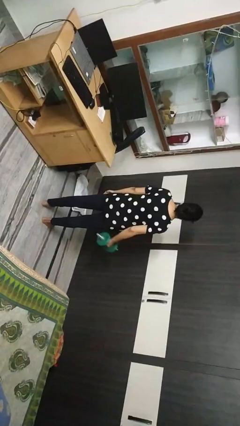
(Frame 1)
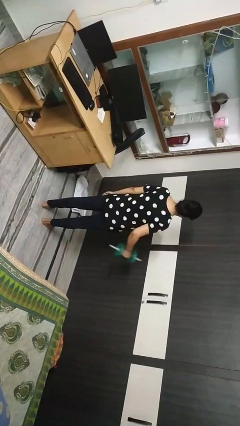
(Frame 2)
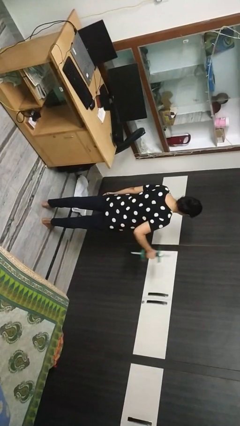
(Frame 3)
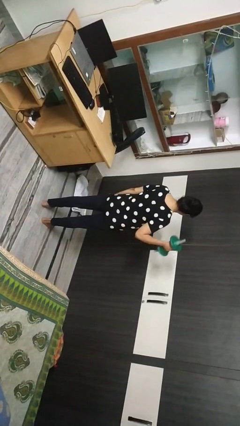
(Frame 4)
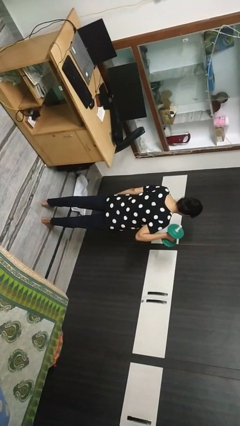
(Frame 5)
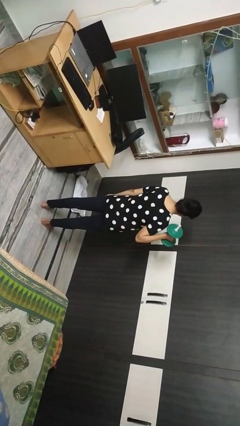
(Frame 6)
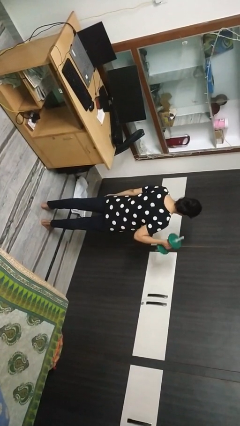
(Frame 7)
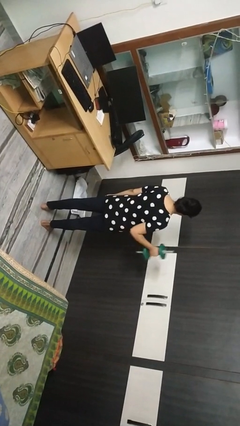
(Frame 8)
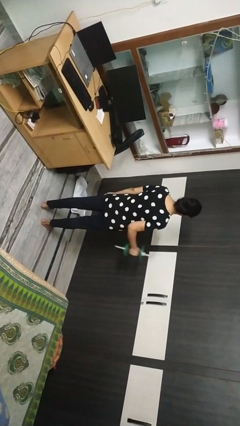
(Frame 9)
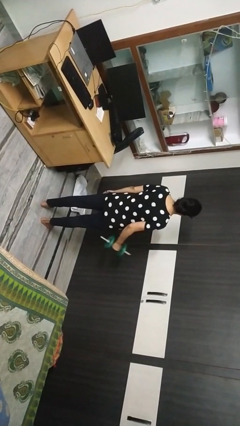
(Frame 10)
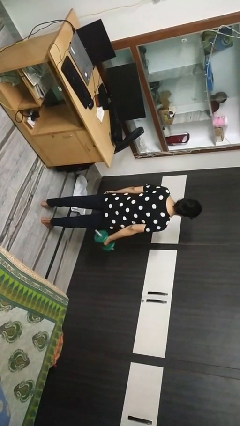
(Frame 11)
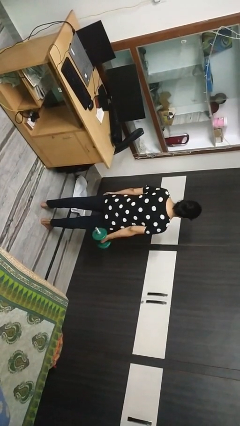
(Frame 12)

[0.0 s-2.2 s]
person lifts dumbbells

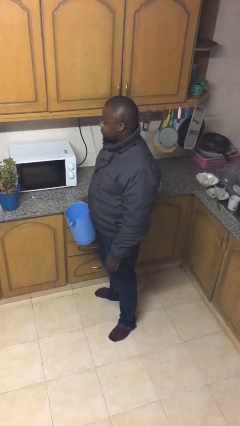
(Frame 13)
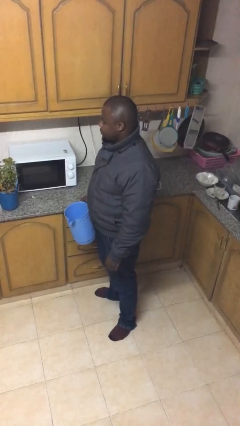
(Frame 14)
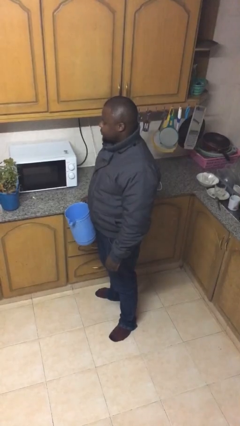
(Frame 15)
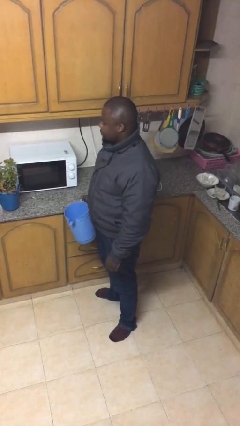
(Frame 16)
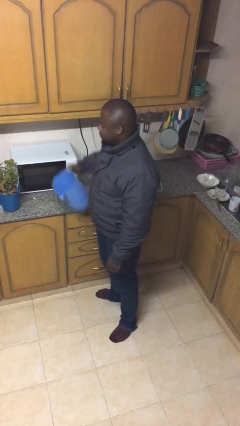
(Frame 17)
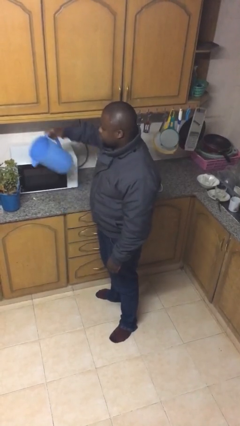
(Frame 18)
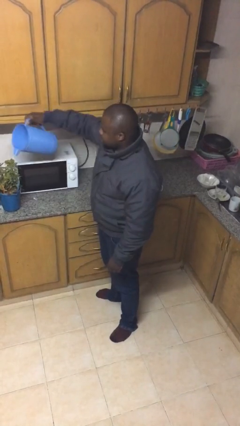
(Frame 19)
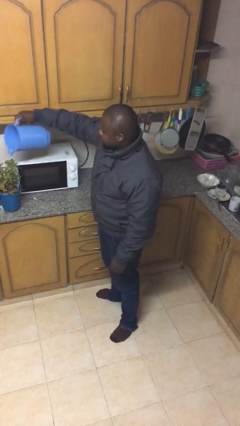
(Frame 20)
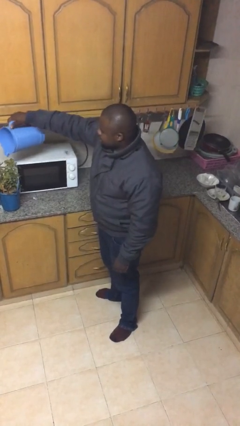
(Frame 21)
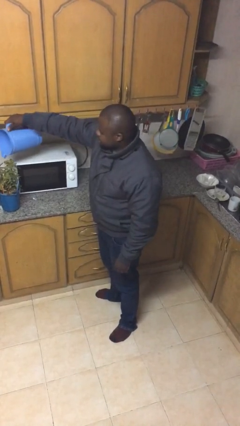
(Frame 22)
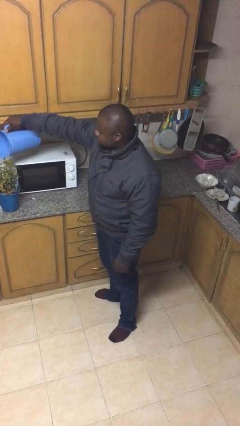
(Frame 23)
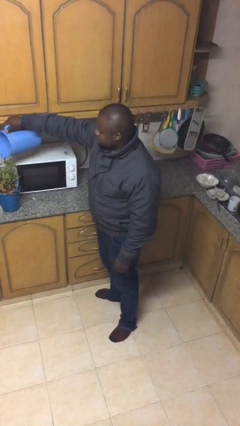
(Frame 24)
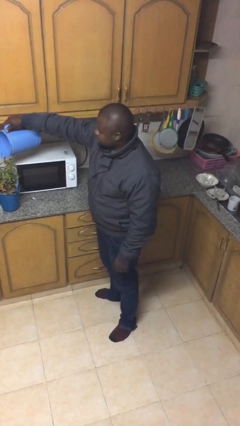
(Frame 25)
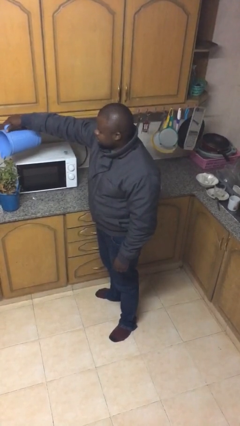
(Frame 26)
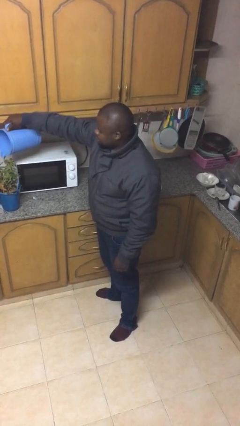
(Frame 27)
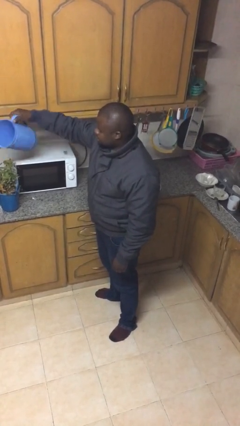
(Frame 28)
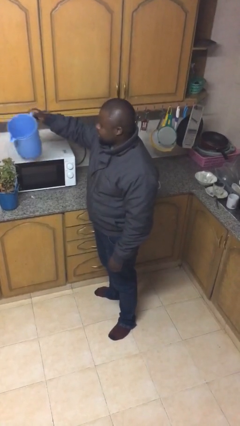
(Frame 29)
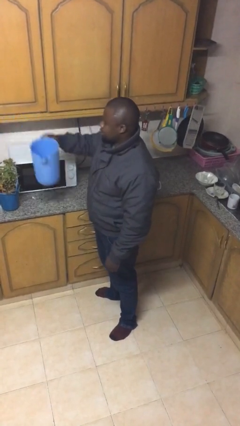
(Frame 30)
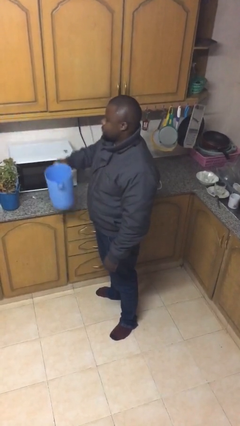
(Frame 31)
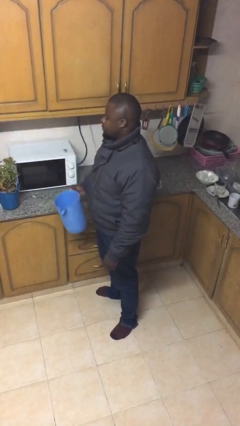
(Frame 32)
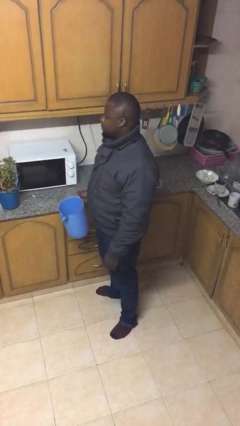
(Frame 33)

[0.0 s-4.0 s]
person waters houseplant

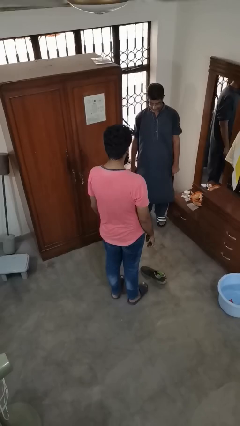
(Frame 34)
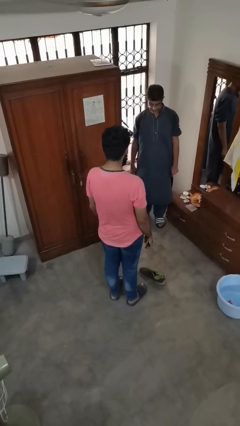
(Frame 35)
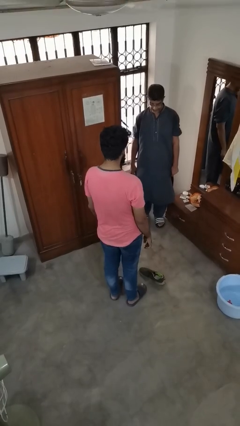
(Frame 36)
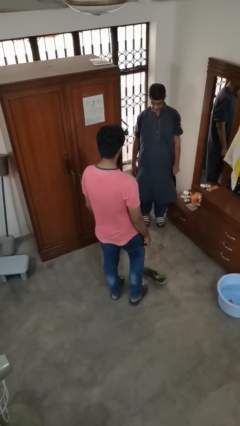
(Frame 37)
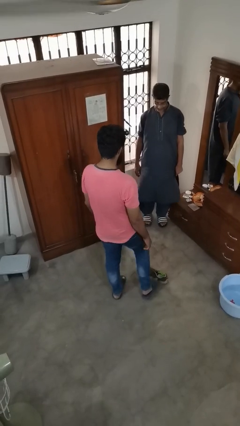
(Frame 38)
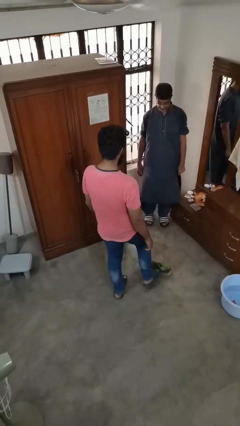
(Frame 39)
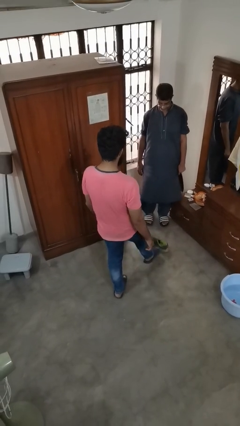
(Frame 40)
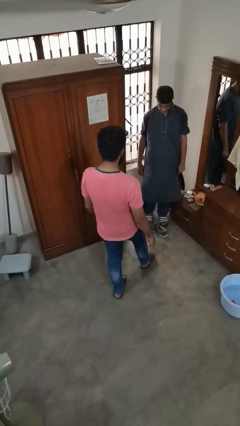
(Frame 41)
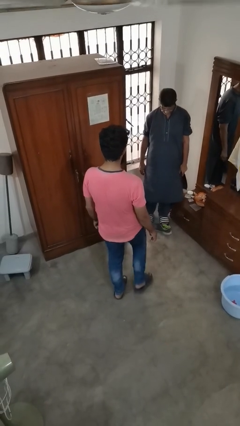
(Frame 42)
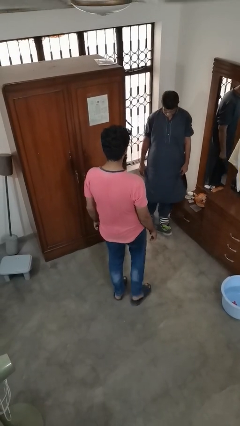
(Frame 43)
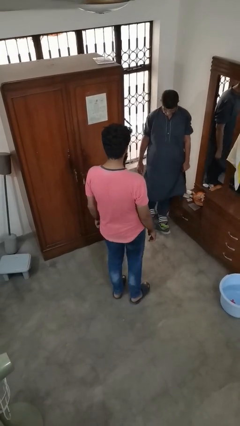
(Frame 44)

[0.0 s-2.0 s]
person kicks object to person

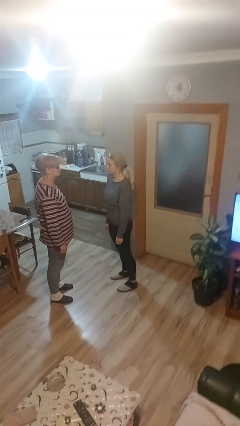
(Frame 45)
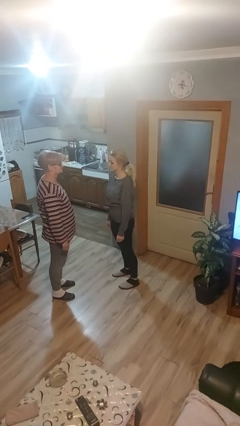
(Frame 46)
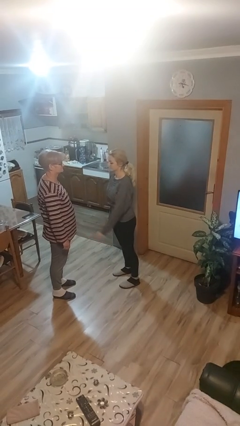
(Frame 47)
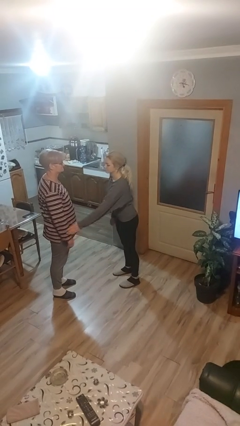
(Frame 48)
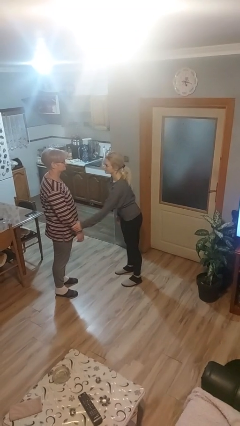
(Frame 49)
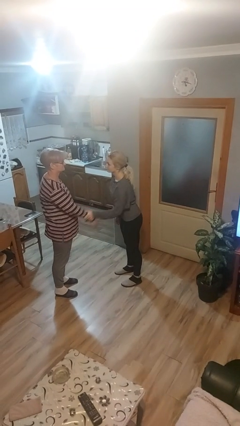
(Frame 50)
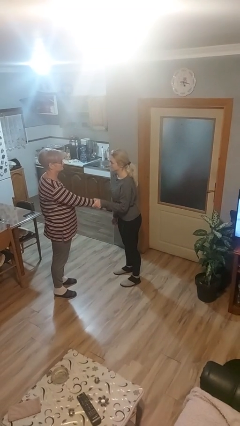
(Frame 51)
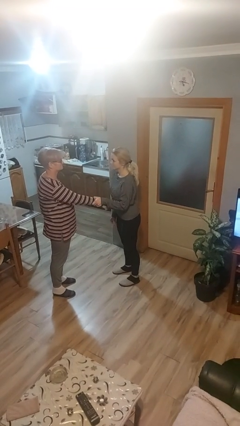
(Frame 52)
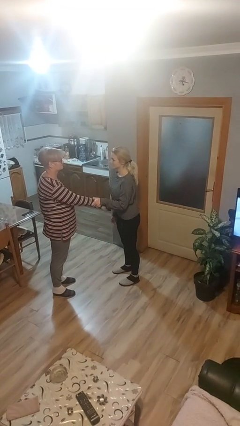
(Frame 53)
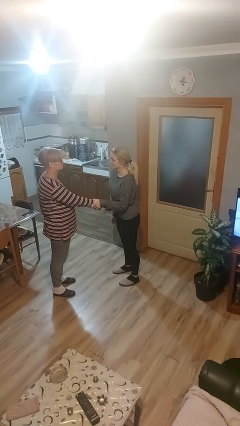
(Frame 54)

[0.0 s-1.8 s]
person grabs person by forearm

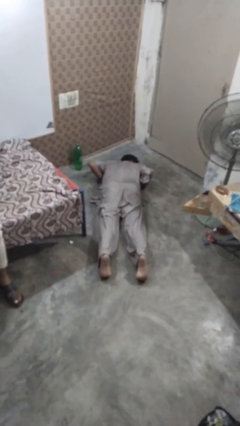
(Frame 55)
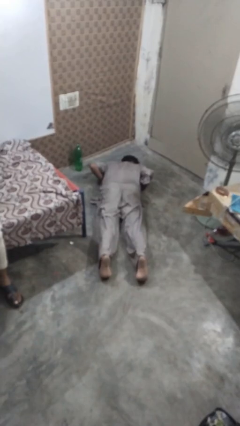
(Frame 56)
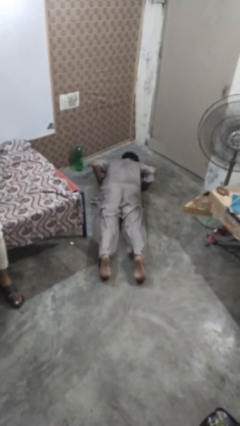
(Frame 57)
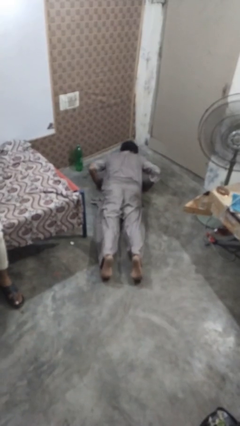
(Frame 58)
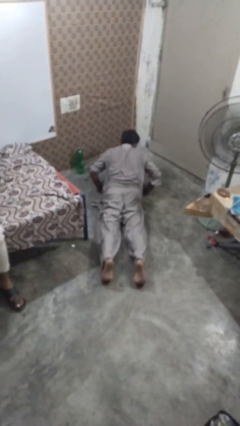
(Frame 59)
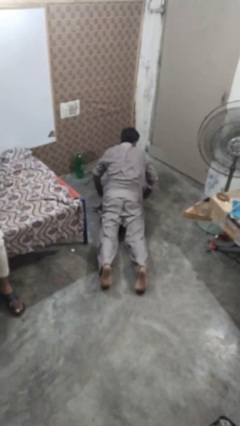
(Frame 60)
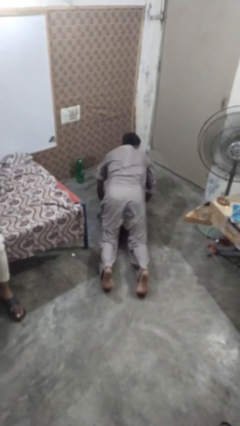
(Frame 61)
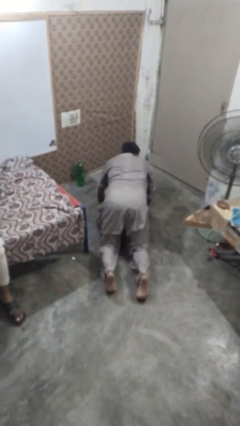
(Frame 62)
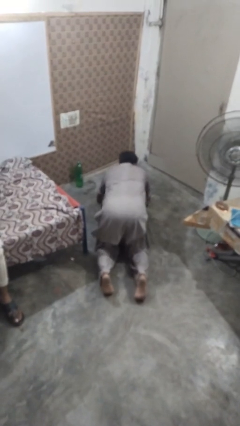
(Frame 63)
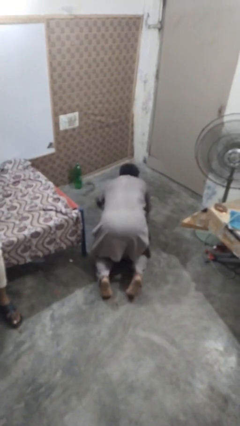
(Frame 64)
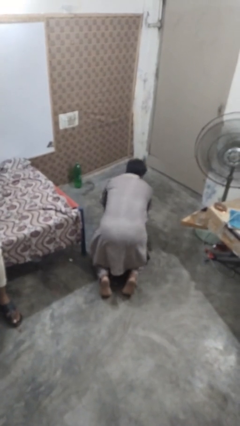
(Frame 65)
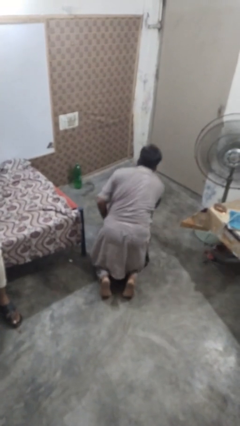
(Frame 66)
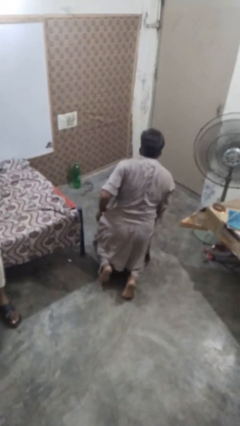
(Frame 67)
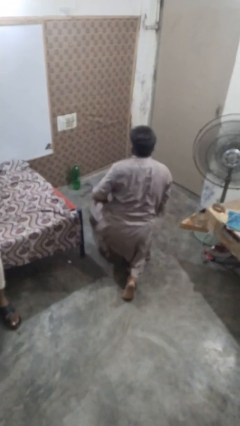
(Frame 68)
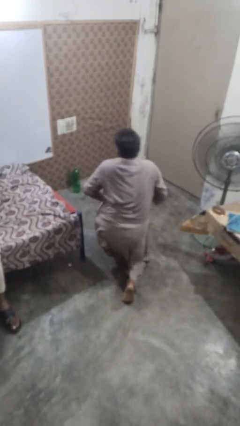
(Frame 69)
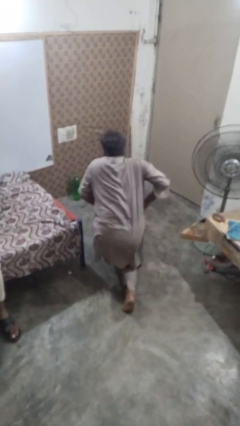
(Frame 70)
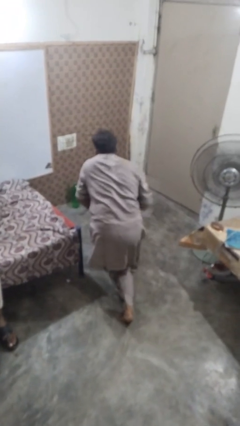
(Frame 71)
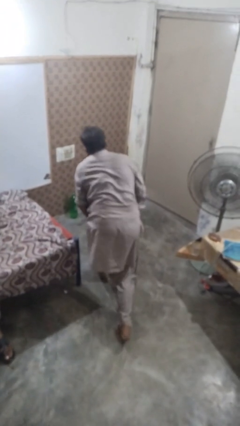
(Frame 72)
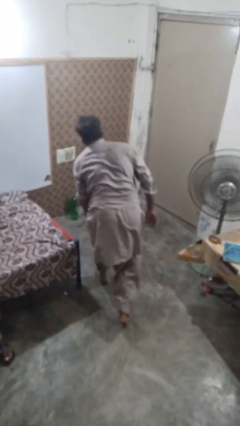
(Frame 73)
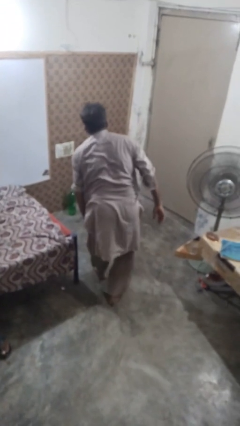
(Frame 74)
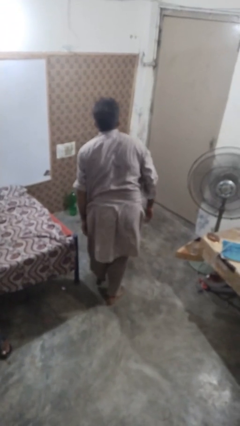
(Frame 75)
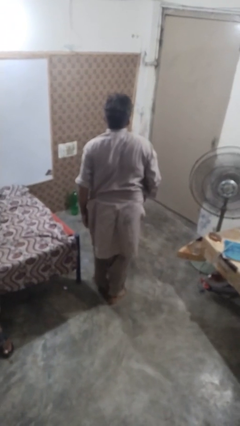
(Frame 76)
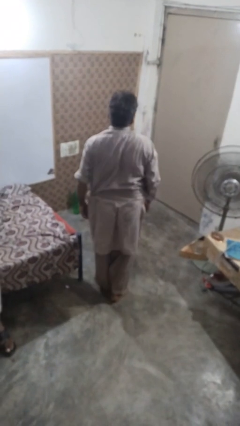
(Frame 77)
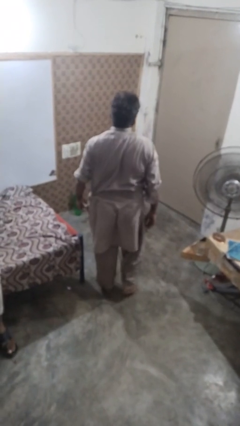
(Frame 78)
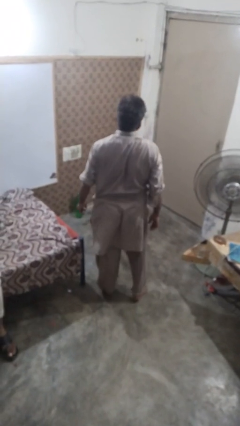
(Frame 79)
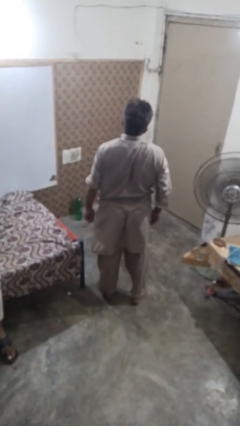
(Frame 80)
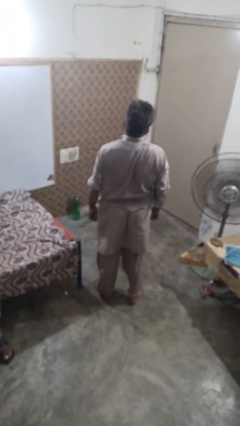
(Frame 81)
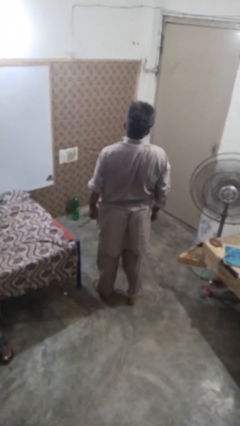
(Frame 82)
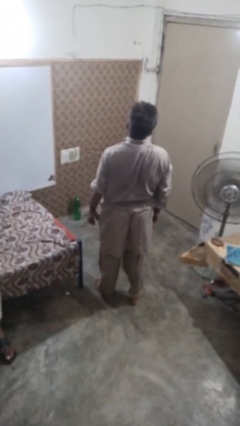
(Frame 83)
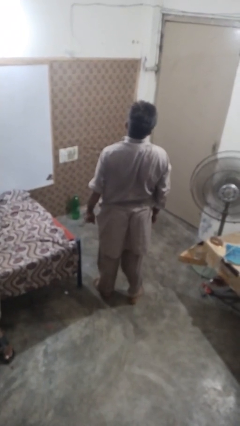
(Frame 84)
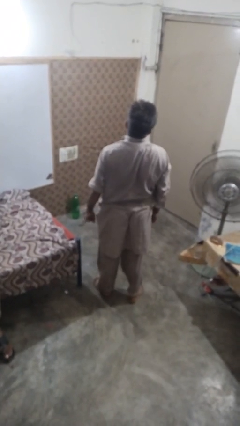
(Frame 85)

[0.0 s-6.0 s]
person stands up from floor

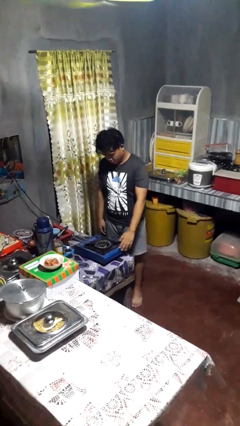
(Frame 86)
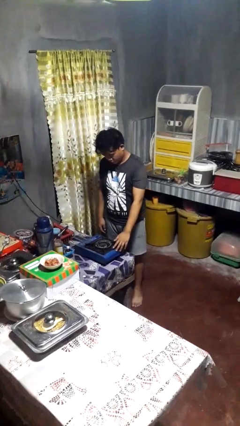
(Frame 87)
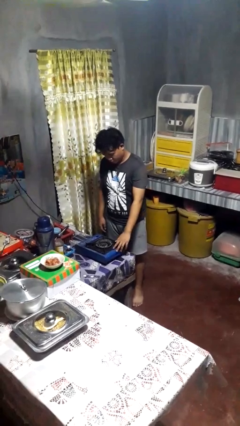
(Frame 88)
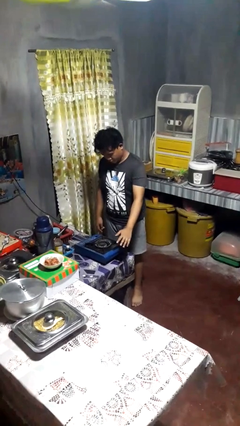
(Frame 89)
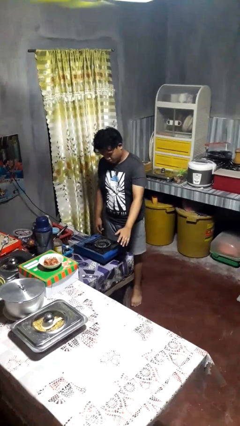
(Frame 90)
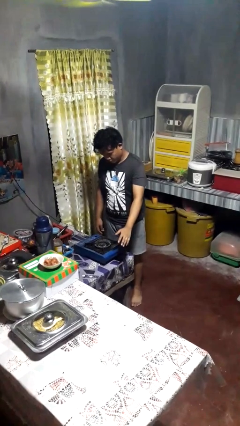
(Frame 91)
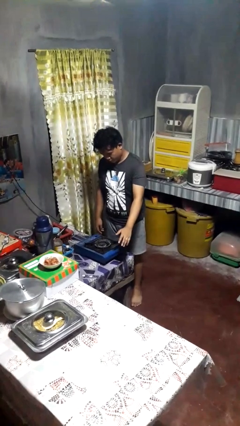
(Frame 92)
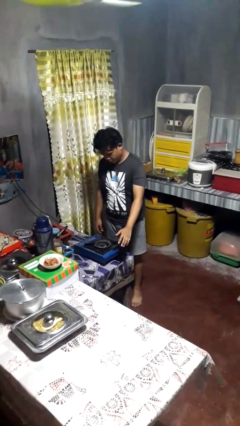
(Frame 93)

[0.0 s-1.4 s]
person burns hand

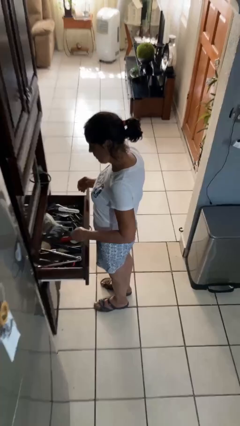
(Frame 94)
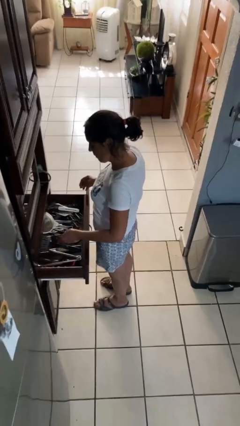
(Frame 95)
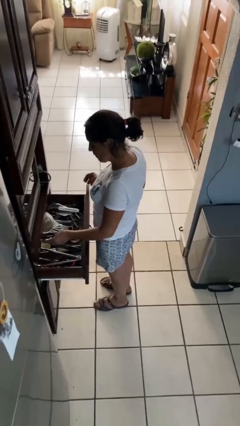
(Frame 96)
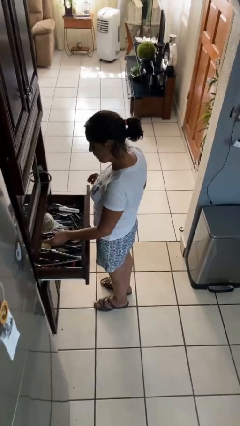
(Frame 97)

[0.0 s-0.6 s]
person puts object into kitchen drawer
